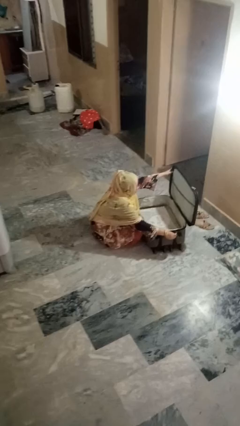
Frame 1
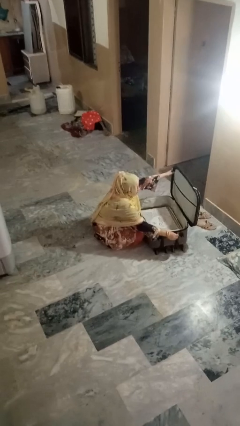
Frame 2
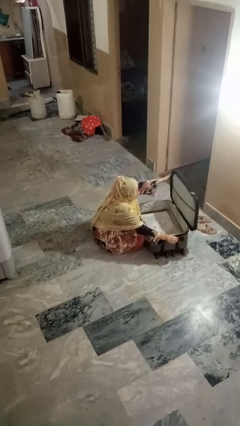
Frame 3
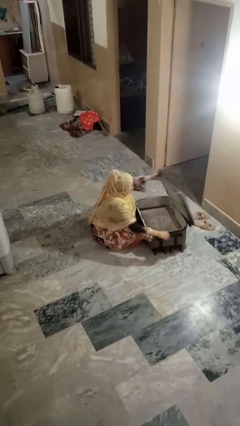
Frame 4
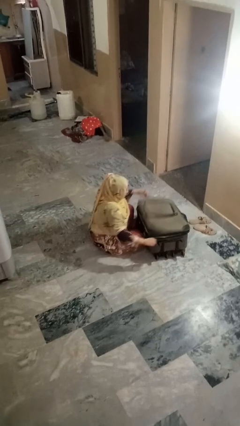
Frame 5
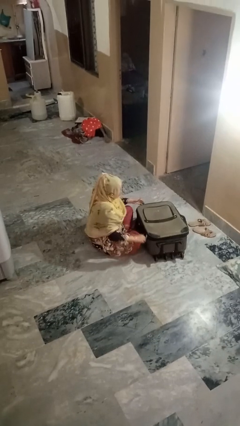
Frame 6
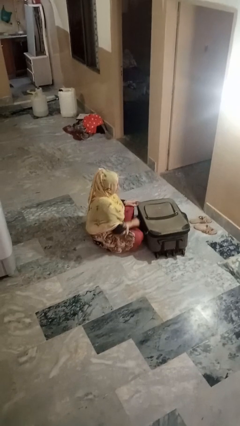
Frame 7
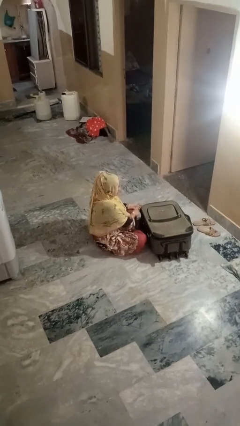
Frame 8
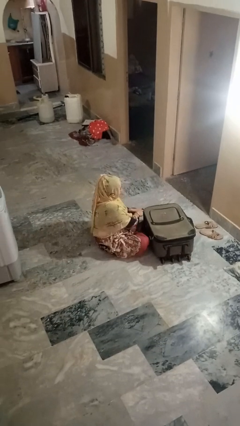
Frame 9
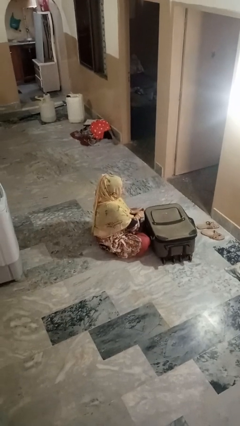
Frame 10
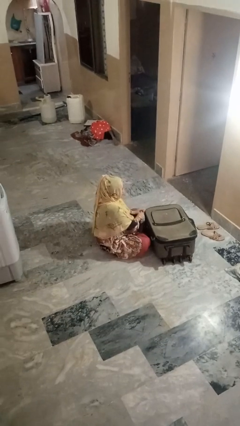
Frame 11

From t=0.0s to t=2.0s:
person closes suitcase

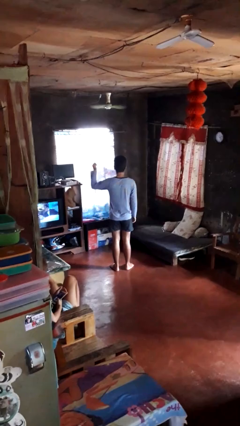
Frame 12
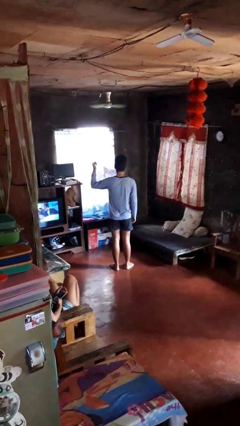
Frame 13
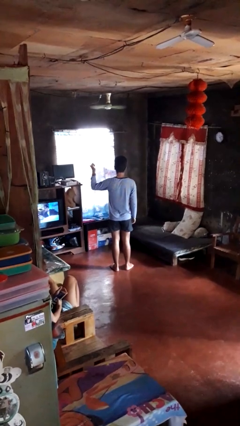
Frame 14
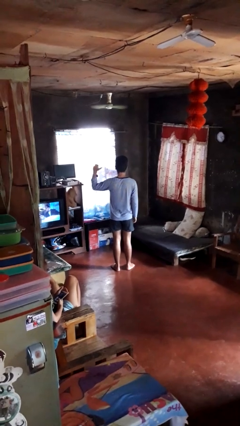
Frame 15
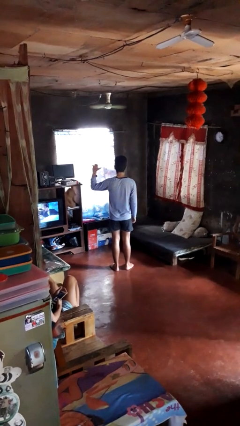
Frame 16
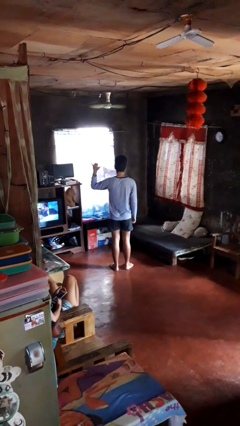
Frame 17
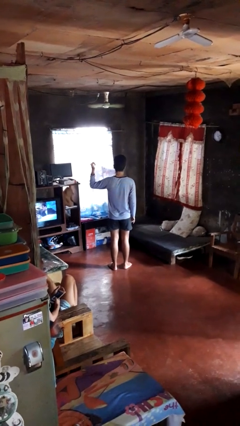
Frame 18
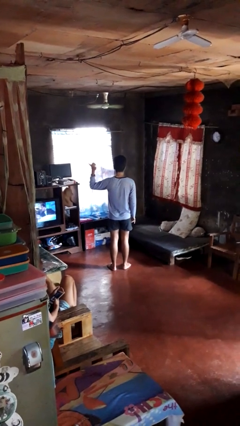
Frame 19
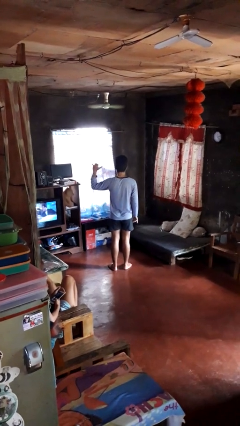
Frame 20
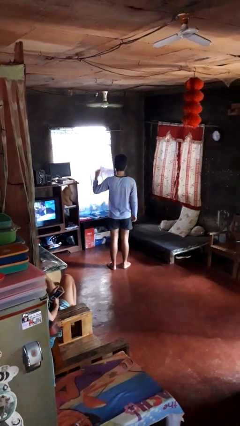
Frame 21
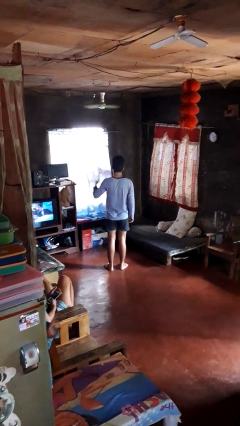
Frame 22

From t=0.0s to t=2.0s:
person gestures hang loose

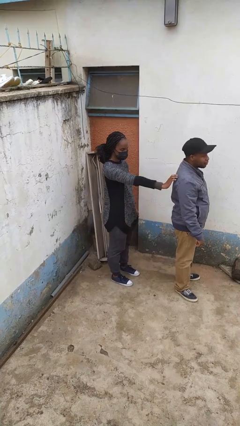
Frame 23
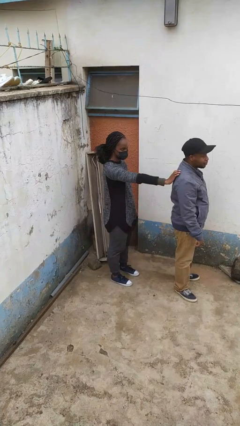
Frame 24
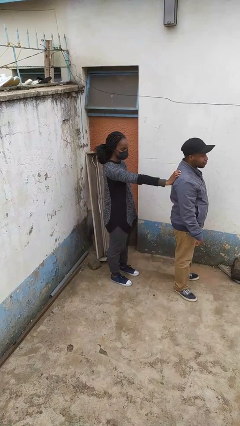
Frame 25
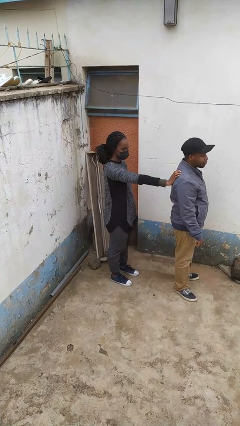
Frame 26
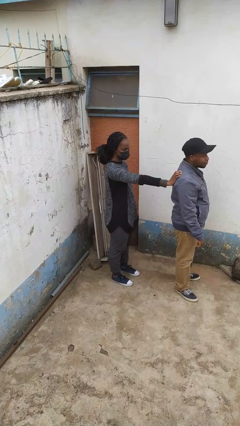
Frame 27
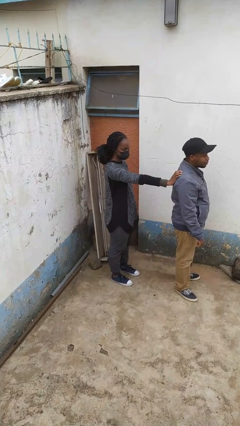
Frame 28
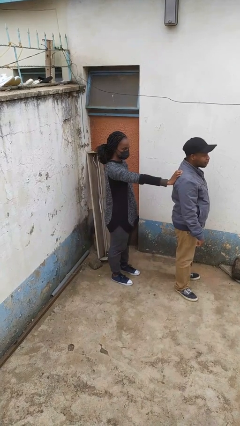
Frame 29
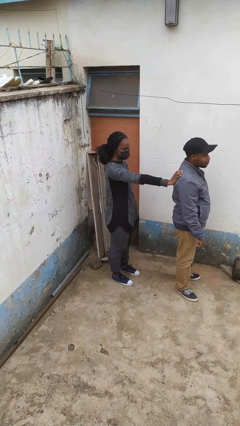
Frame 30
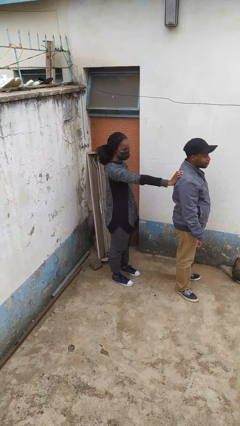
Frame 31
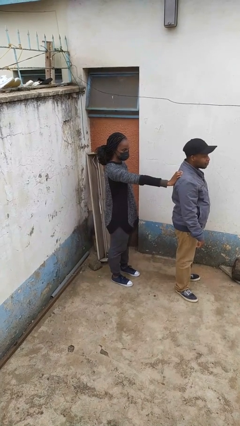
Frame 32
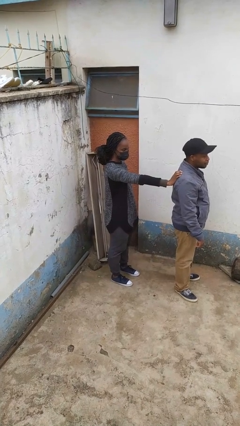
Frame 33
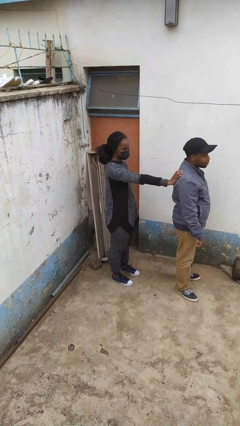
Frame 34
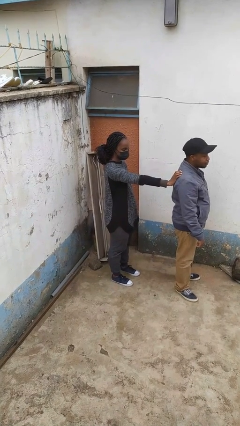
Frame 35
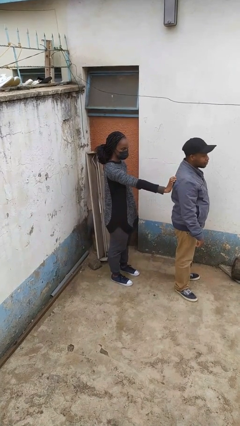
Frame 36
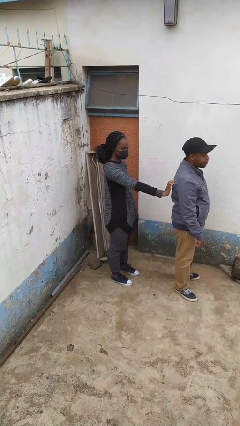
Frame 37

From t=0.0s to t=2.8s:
person touches back of person

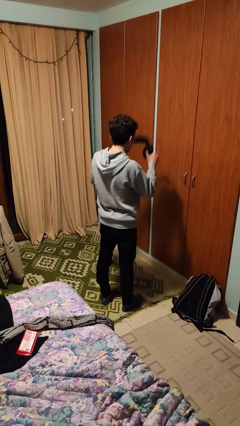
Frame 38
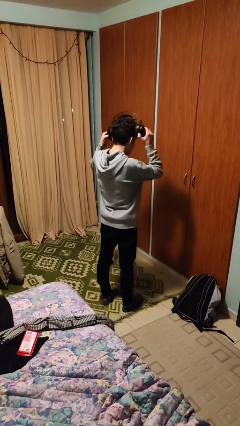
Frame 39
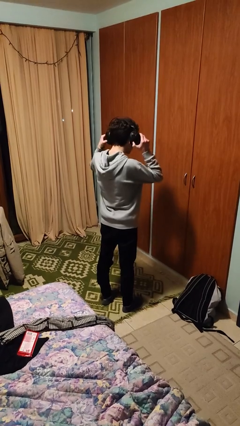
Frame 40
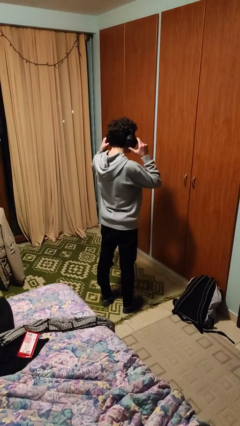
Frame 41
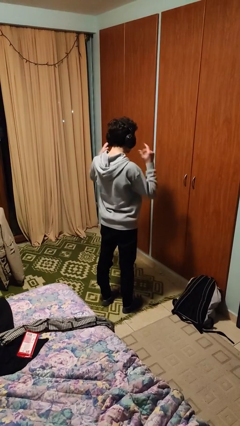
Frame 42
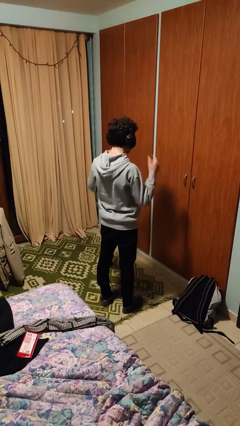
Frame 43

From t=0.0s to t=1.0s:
person puts on headphones

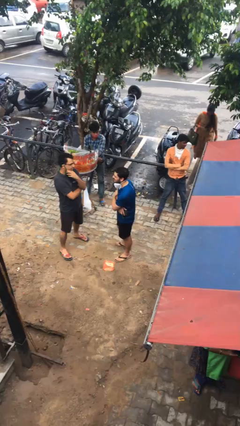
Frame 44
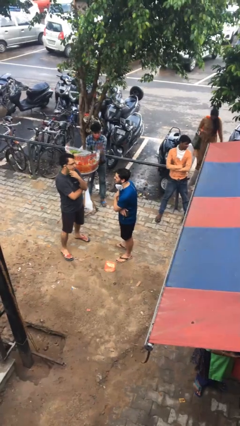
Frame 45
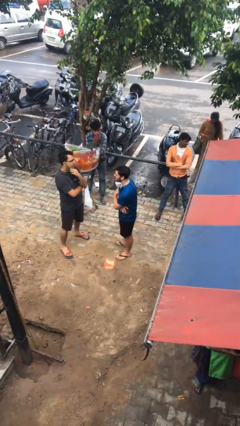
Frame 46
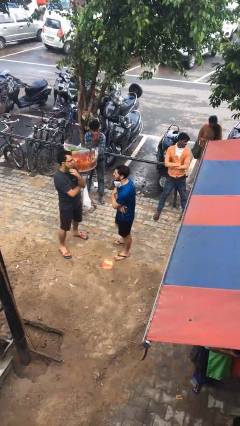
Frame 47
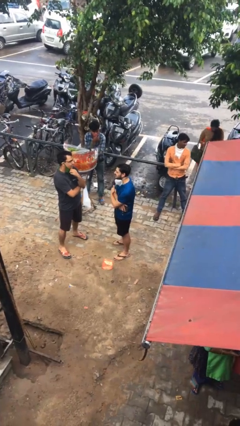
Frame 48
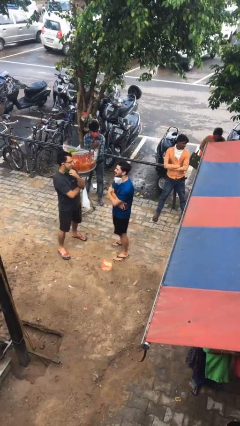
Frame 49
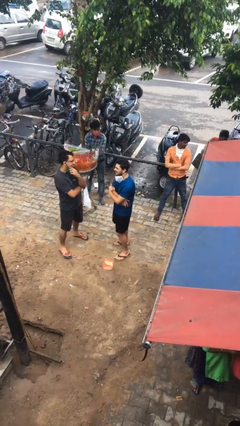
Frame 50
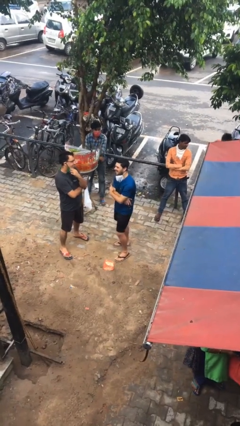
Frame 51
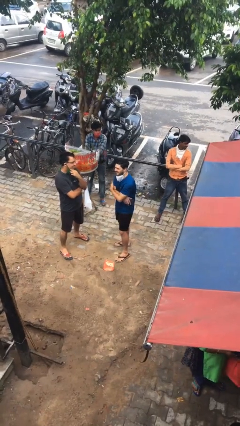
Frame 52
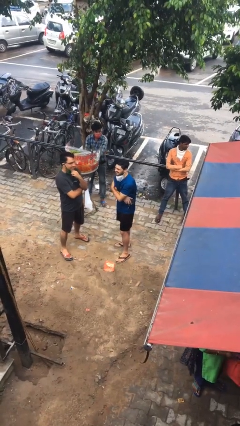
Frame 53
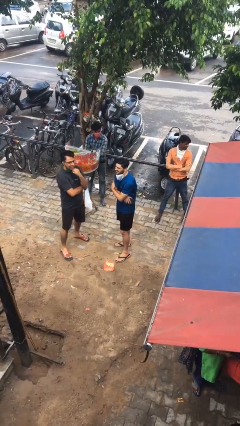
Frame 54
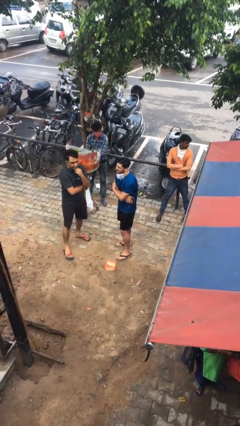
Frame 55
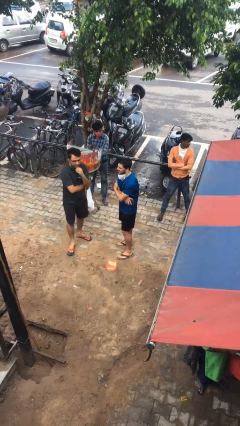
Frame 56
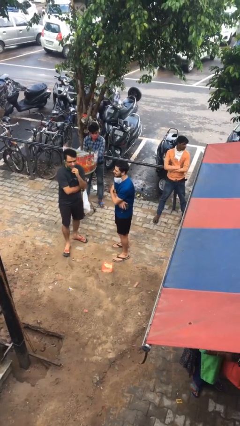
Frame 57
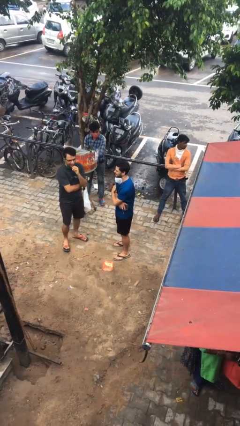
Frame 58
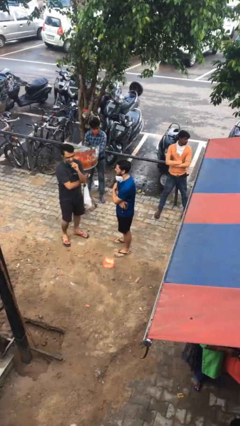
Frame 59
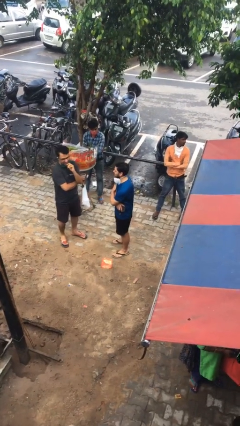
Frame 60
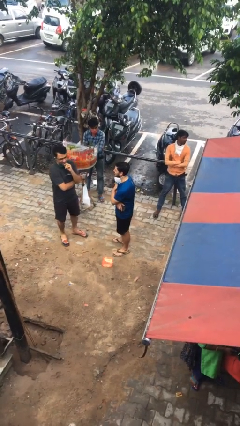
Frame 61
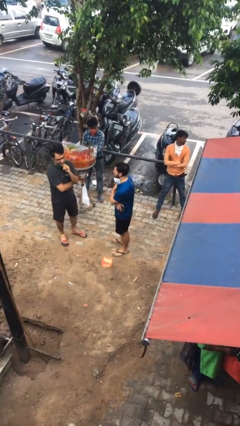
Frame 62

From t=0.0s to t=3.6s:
person laughs with person

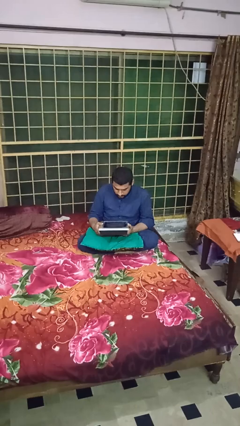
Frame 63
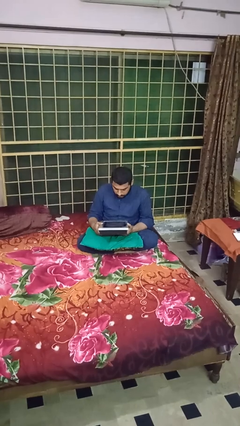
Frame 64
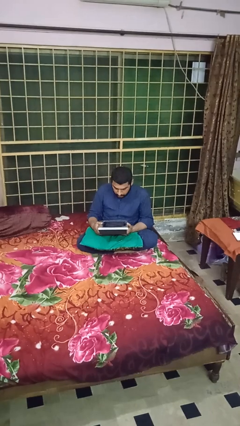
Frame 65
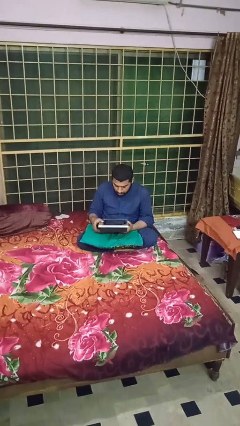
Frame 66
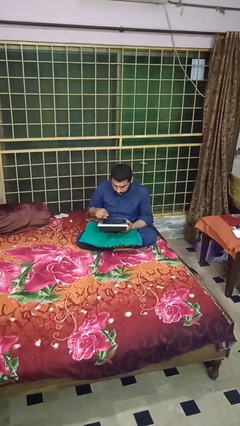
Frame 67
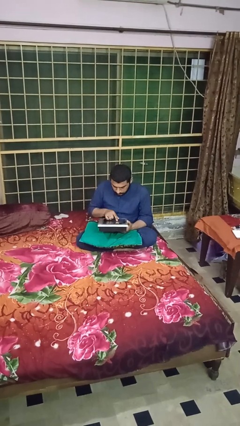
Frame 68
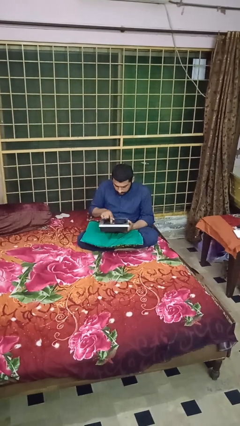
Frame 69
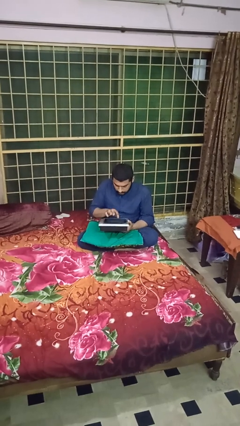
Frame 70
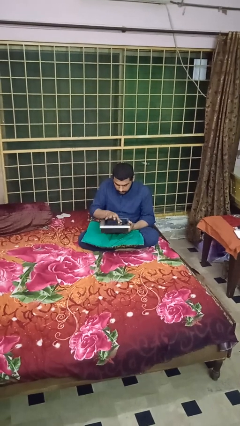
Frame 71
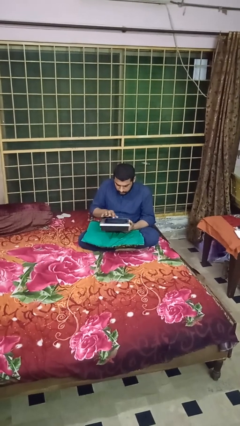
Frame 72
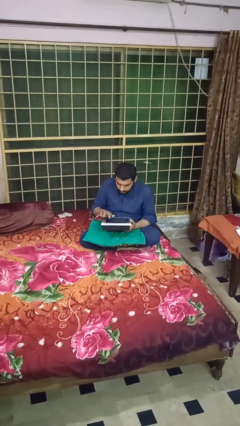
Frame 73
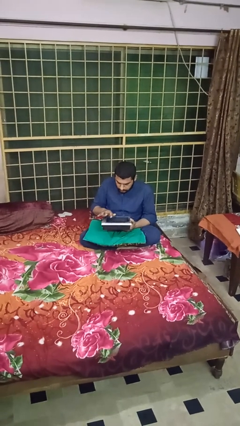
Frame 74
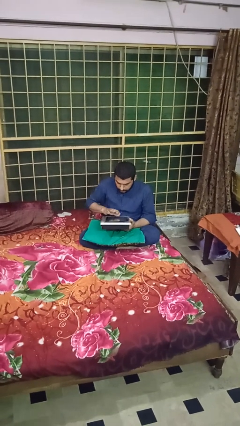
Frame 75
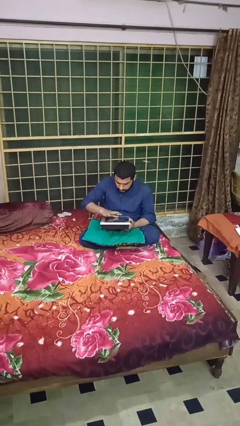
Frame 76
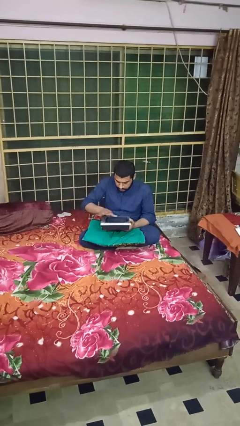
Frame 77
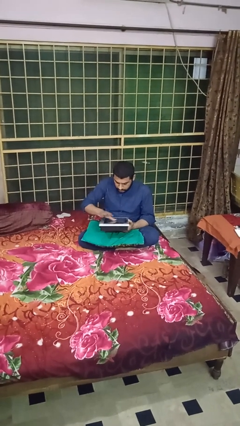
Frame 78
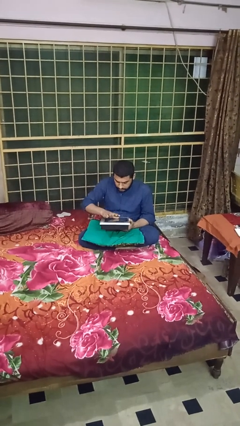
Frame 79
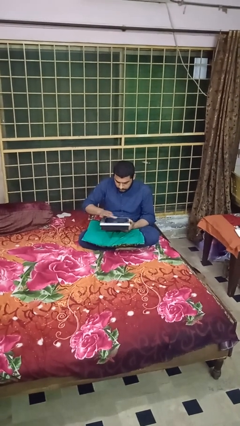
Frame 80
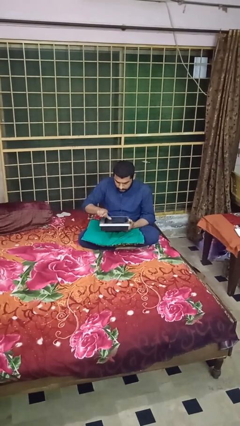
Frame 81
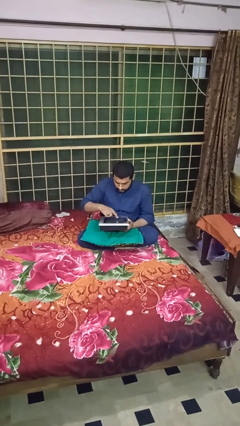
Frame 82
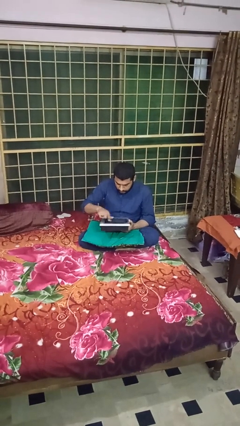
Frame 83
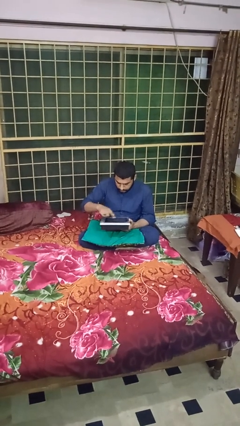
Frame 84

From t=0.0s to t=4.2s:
person interacts with tablet

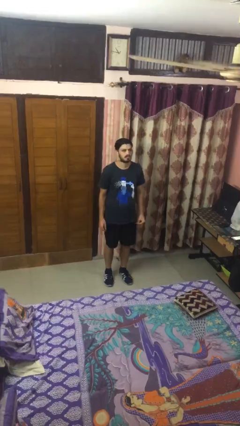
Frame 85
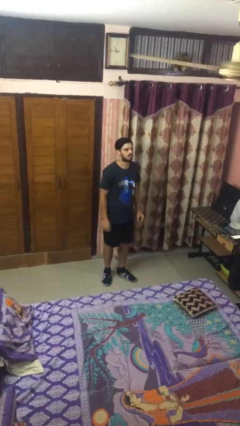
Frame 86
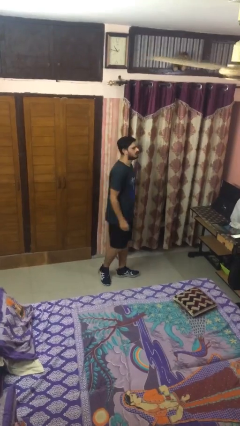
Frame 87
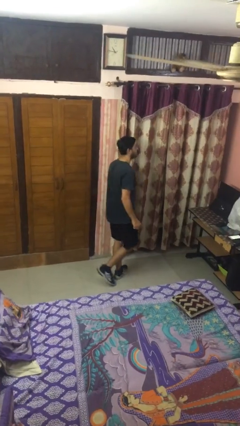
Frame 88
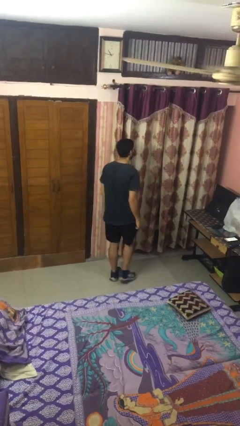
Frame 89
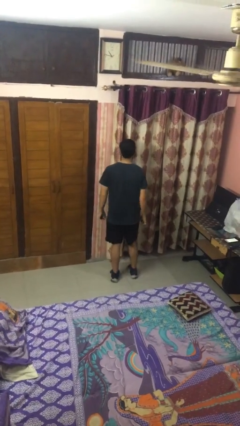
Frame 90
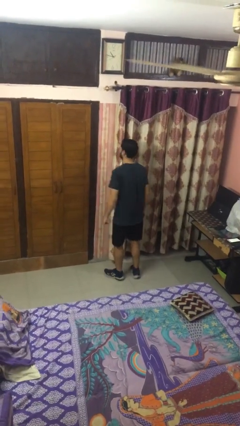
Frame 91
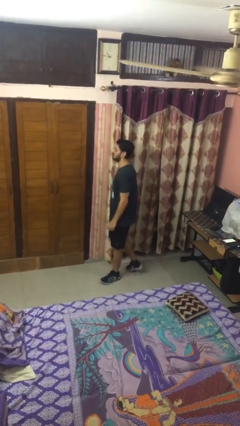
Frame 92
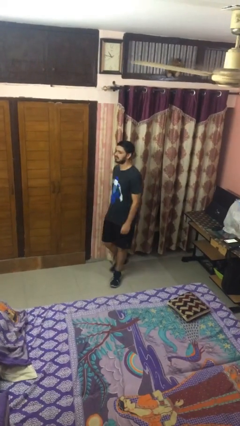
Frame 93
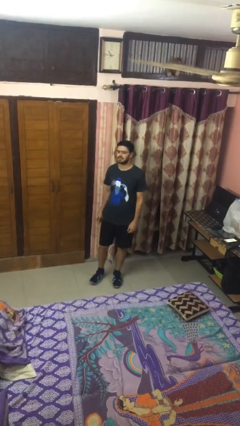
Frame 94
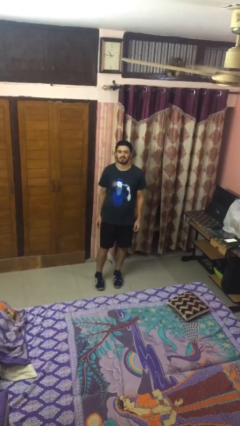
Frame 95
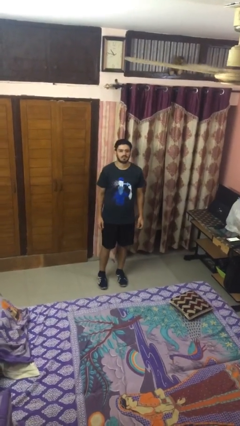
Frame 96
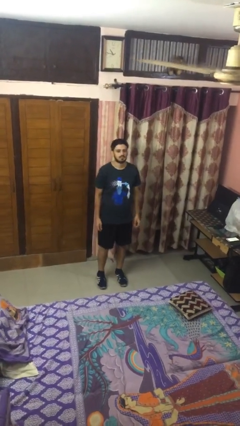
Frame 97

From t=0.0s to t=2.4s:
person twirls
